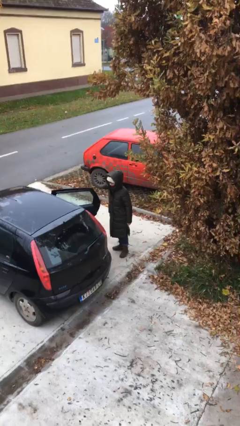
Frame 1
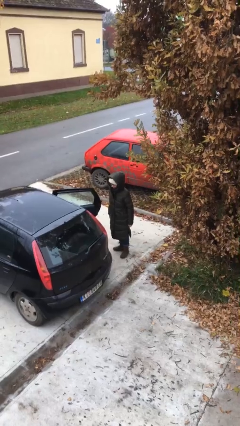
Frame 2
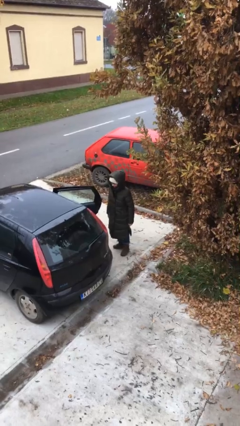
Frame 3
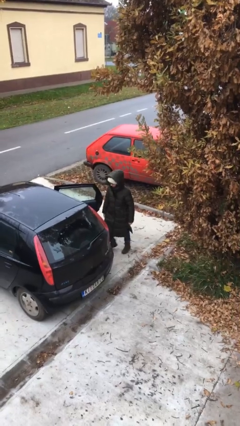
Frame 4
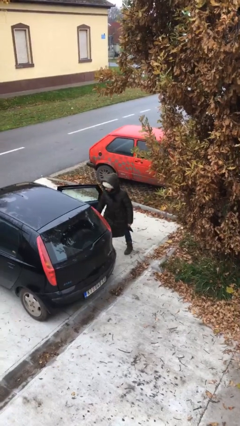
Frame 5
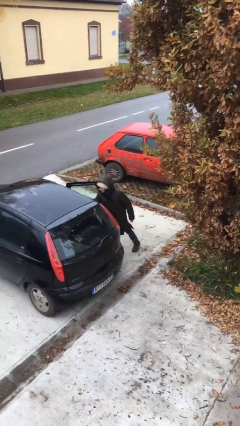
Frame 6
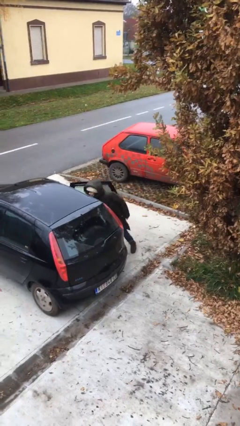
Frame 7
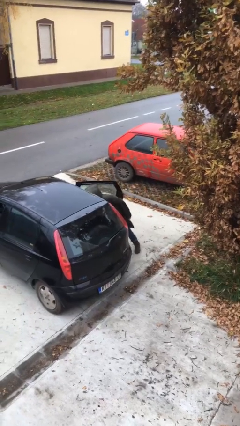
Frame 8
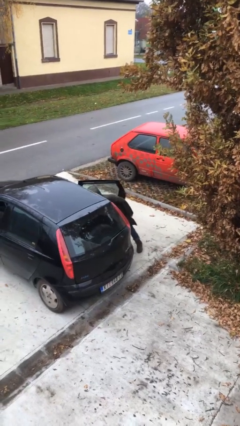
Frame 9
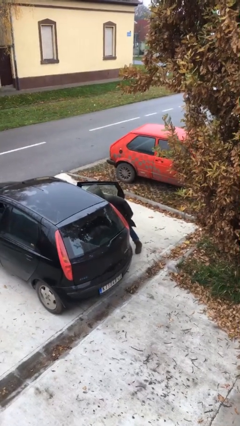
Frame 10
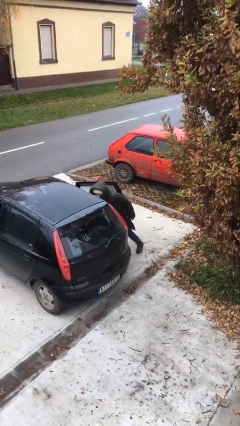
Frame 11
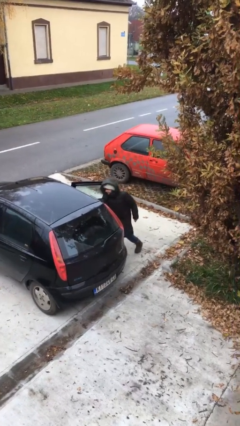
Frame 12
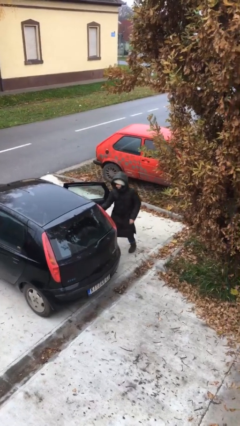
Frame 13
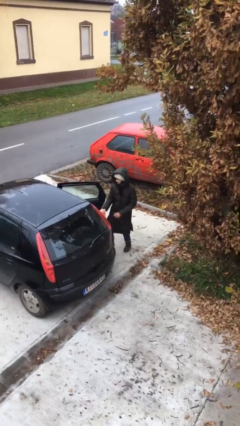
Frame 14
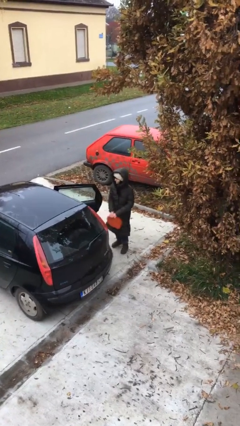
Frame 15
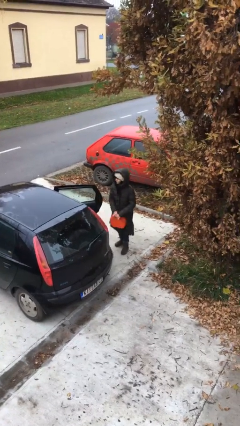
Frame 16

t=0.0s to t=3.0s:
person unloads car

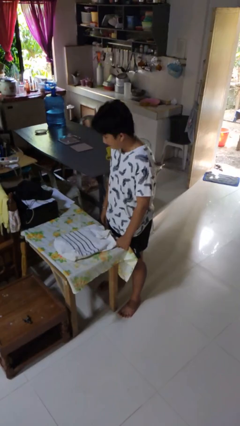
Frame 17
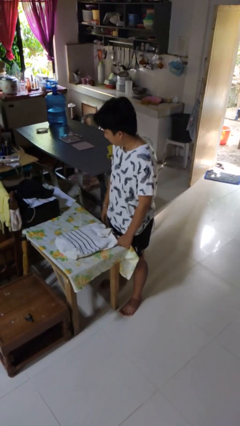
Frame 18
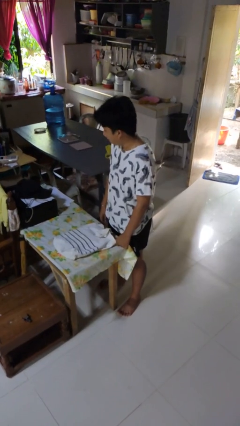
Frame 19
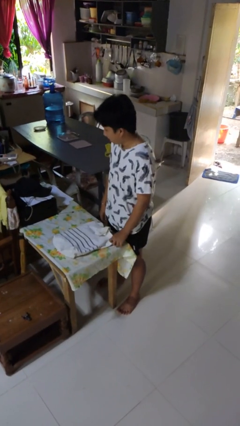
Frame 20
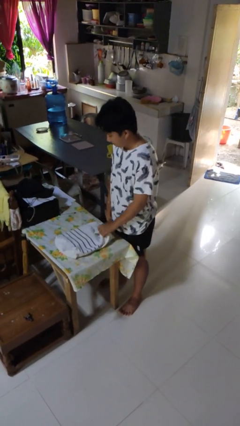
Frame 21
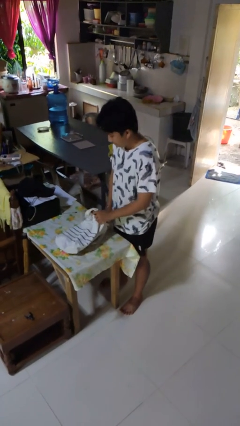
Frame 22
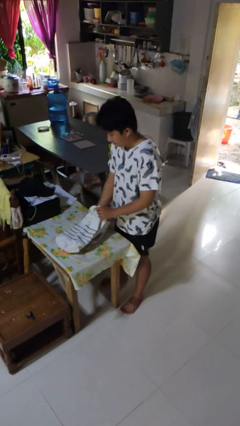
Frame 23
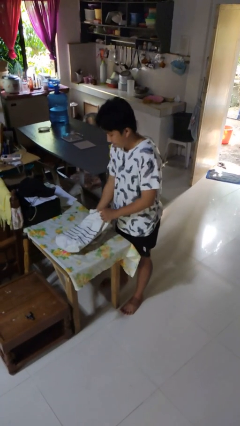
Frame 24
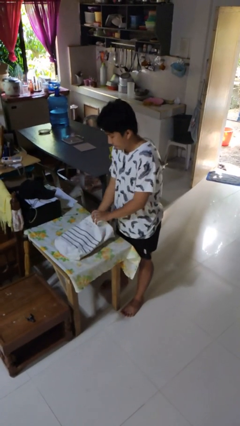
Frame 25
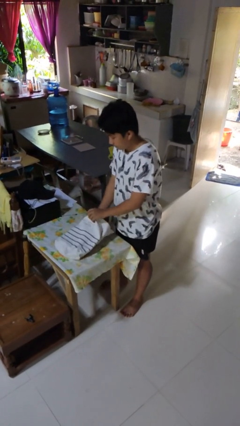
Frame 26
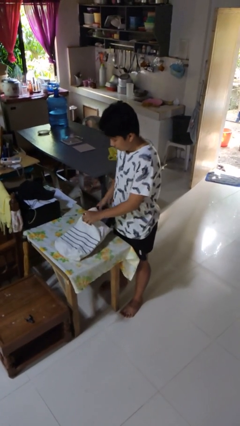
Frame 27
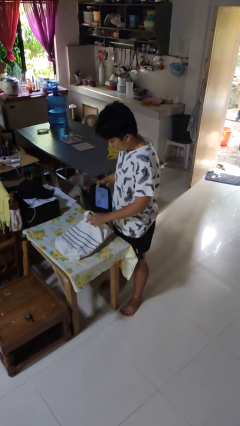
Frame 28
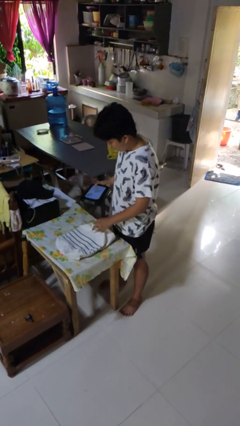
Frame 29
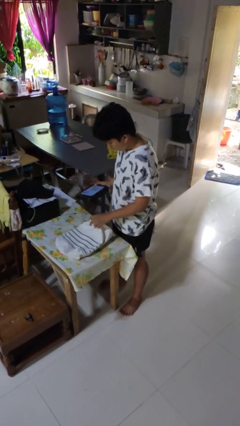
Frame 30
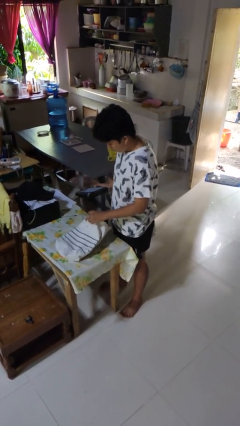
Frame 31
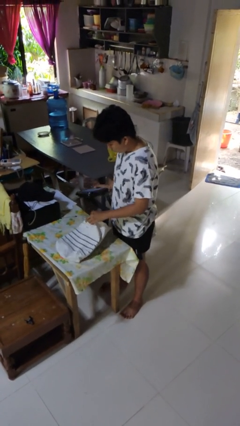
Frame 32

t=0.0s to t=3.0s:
person takes object from bag

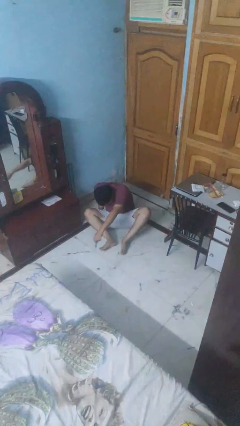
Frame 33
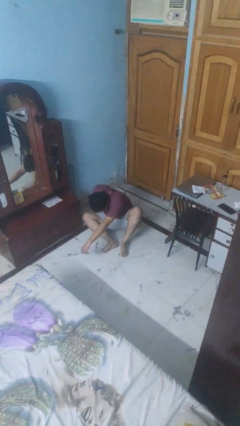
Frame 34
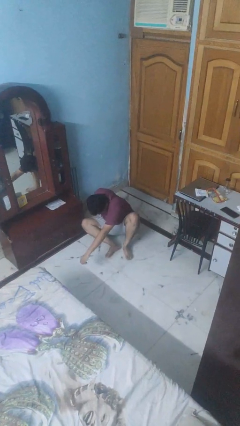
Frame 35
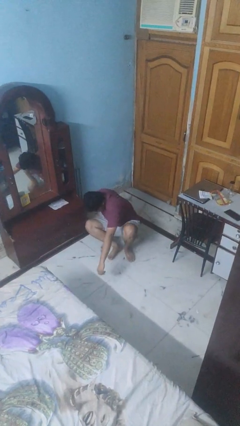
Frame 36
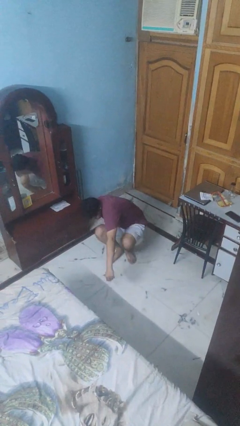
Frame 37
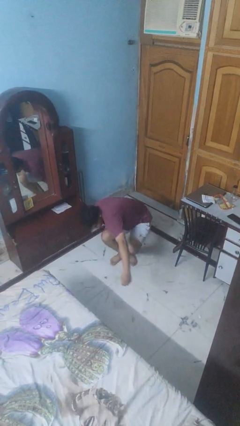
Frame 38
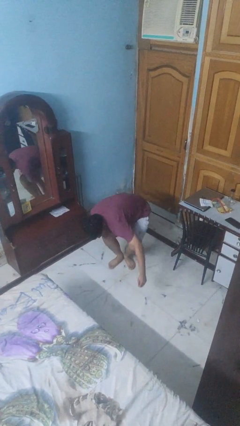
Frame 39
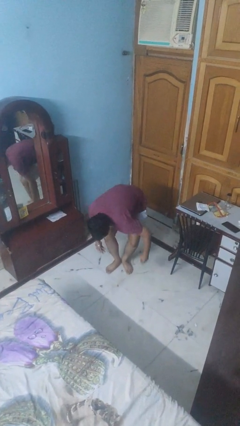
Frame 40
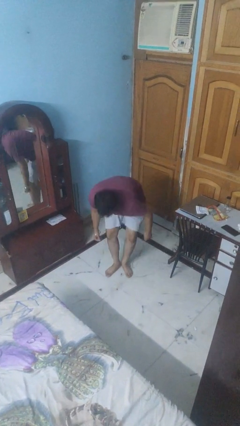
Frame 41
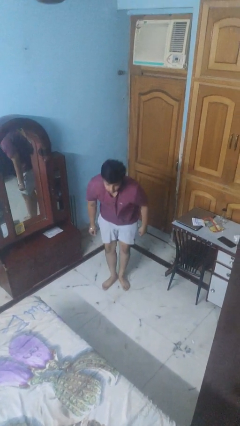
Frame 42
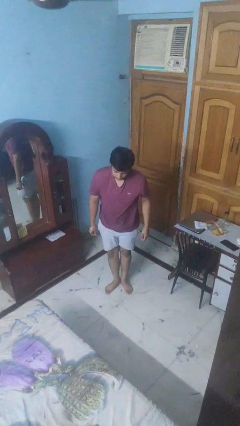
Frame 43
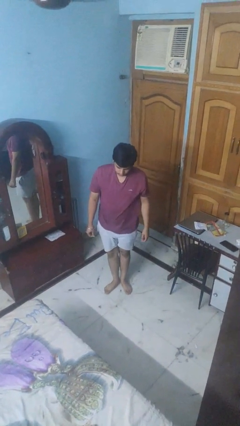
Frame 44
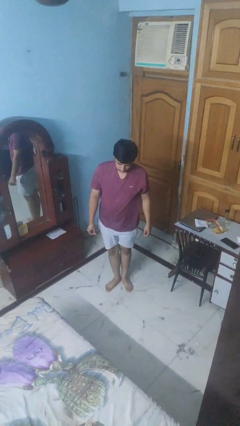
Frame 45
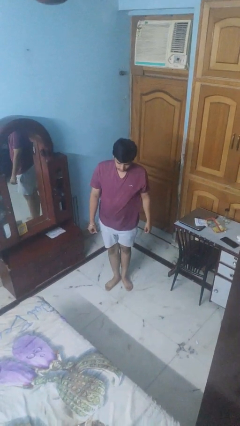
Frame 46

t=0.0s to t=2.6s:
person stands up from floor

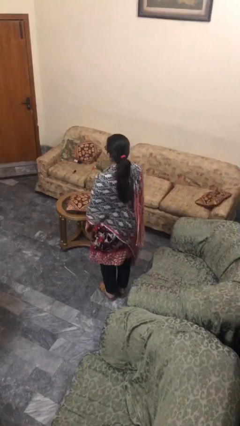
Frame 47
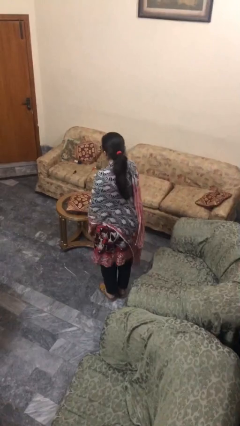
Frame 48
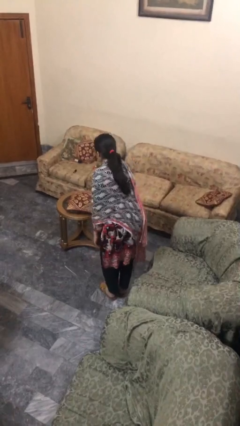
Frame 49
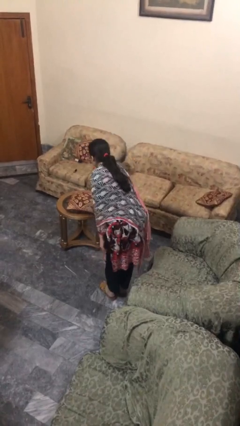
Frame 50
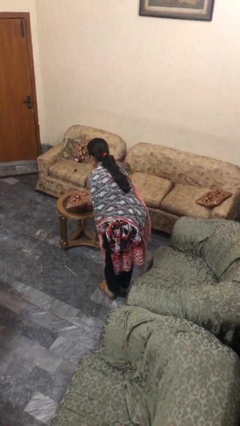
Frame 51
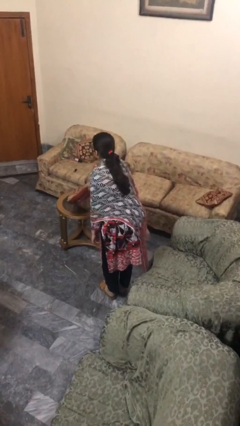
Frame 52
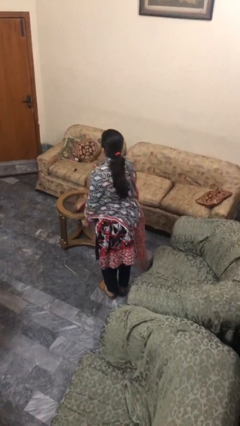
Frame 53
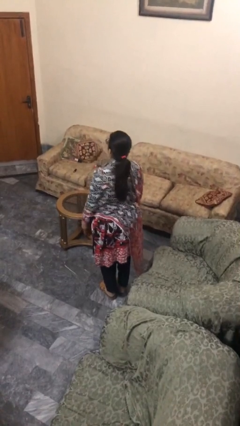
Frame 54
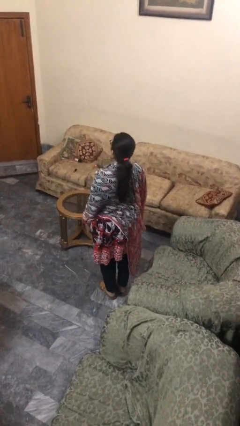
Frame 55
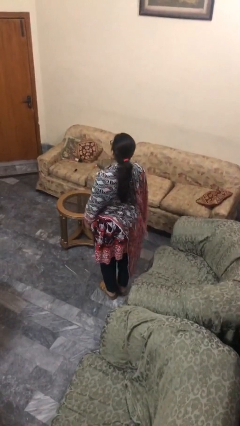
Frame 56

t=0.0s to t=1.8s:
person picks up object from table

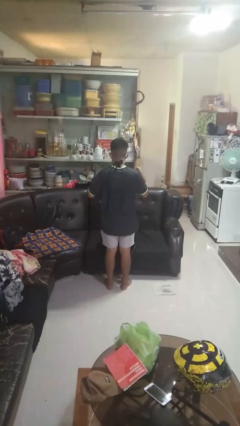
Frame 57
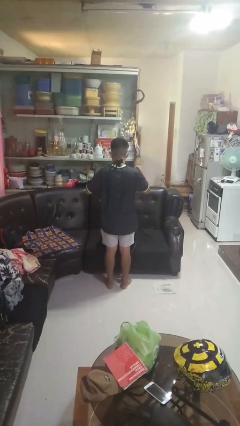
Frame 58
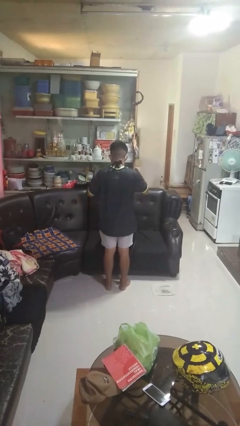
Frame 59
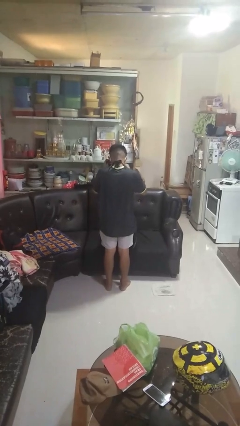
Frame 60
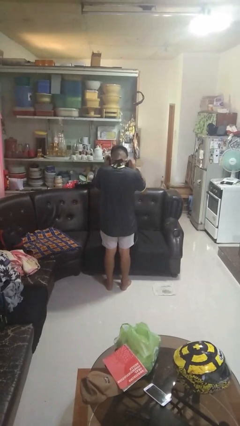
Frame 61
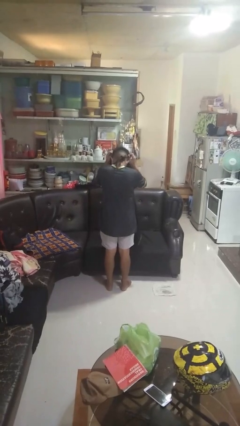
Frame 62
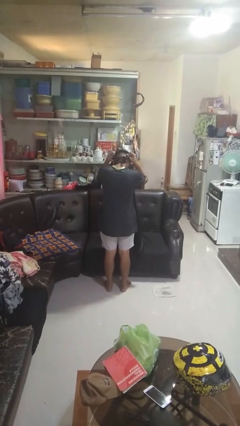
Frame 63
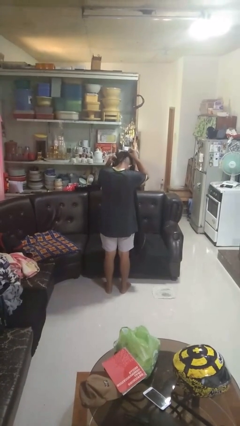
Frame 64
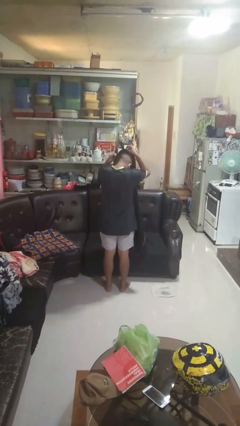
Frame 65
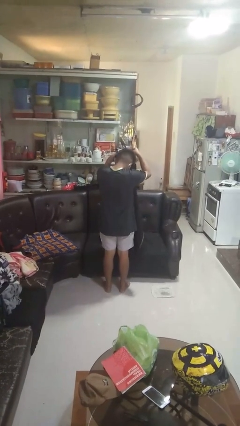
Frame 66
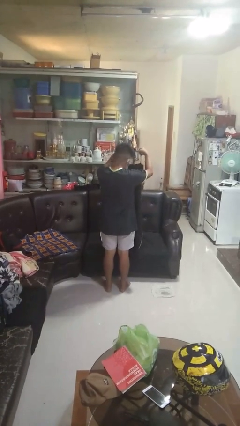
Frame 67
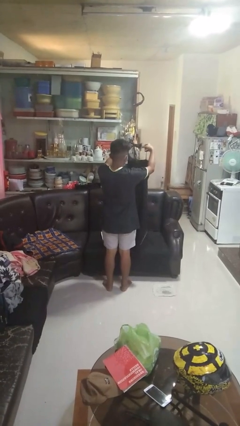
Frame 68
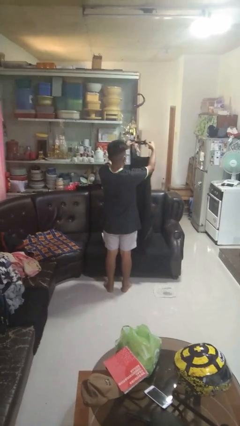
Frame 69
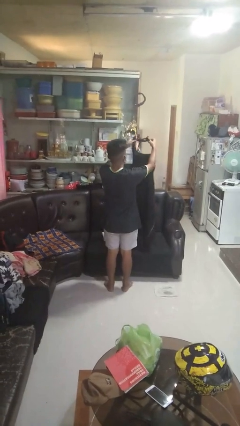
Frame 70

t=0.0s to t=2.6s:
person takes off apron

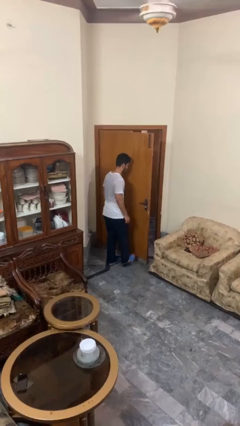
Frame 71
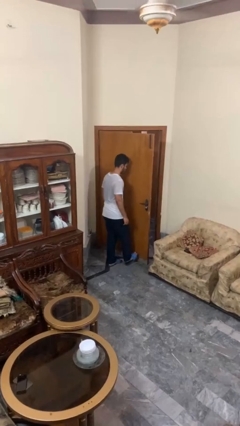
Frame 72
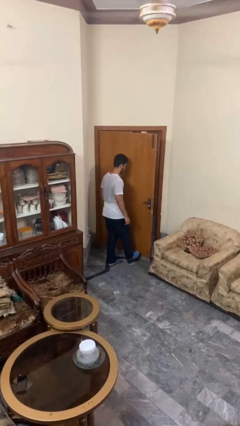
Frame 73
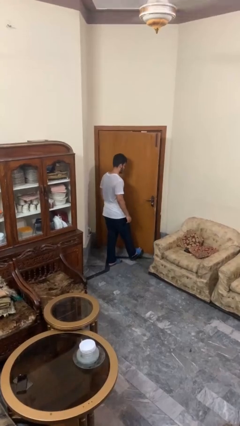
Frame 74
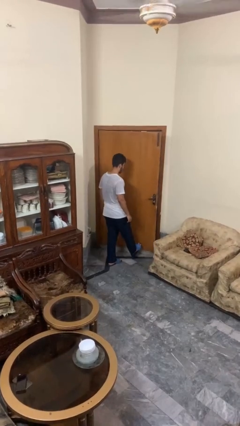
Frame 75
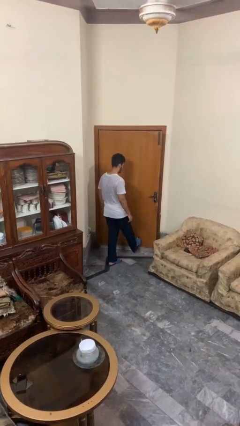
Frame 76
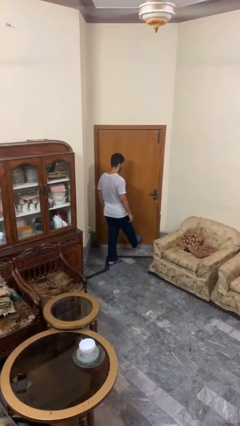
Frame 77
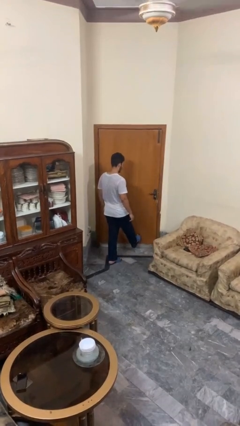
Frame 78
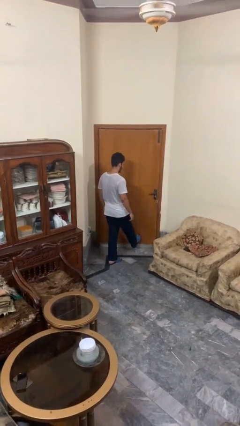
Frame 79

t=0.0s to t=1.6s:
person closes door with foot

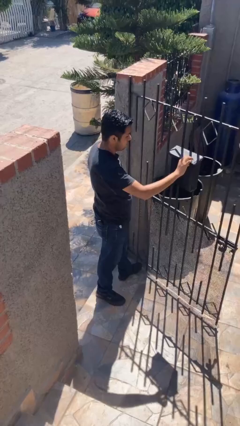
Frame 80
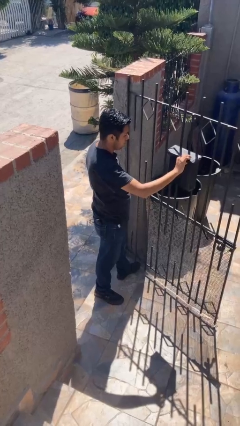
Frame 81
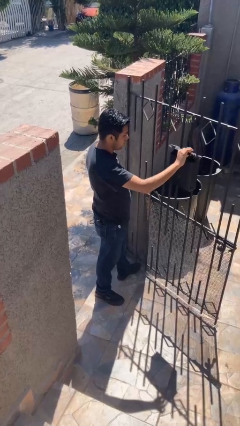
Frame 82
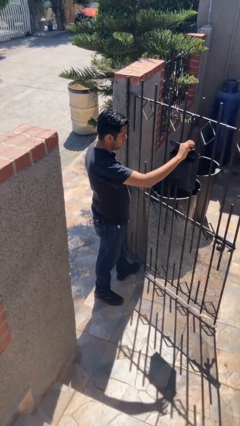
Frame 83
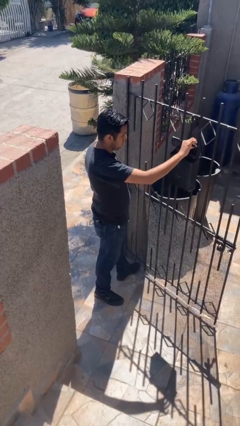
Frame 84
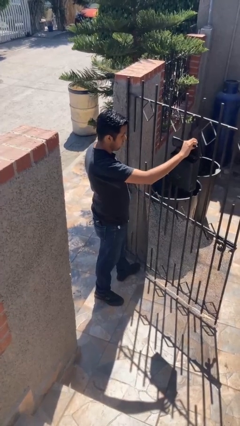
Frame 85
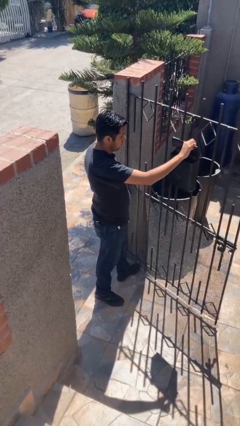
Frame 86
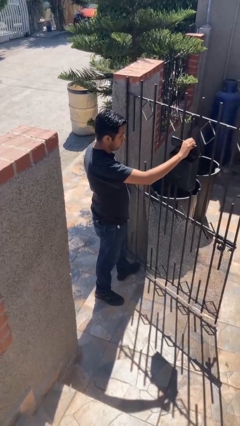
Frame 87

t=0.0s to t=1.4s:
person opens mailbox

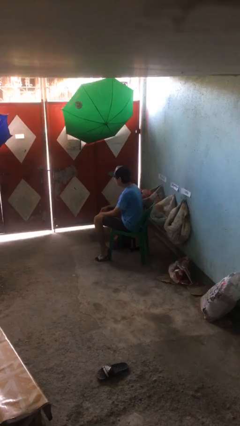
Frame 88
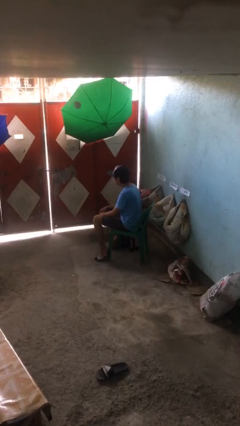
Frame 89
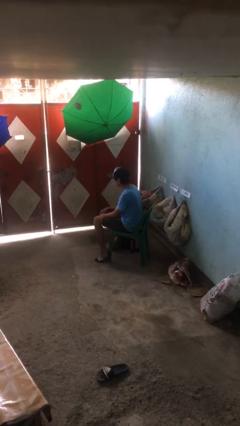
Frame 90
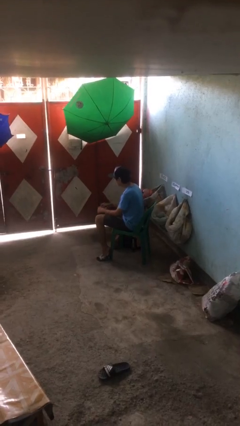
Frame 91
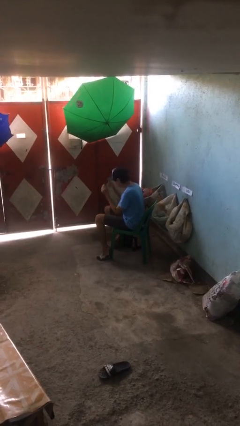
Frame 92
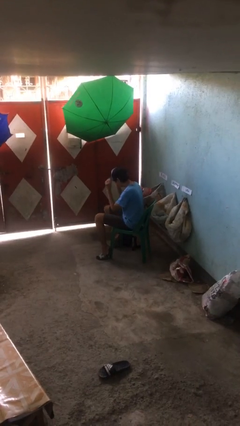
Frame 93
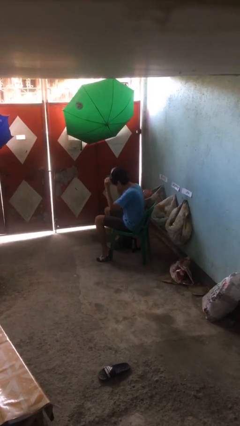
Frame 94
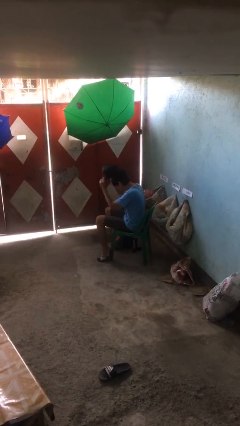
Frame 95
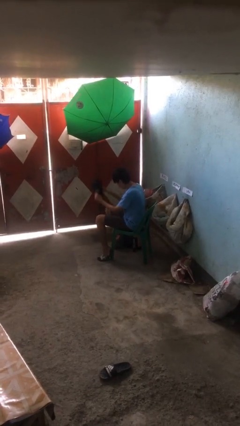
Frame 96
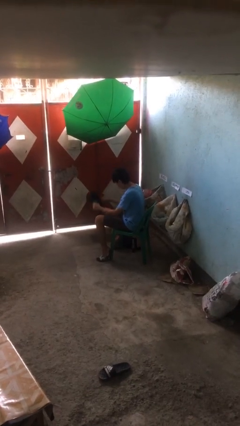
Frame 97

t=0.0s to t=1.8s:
person takes off hat
